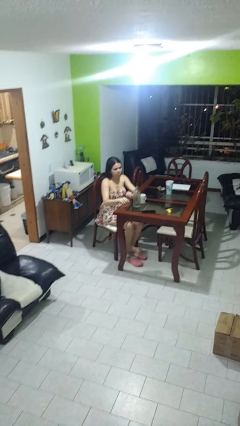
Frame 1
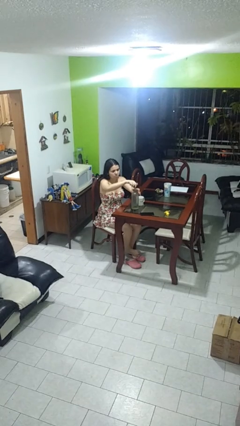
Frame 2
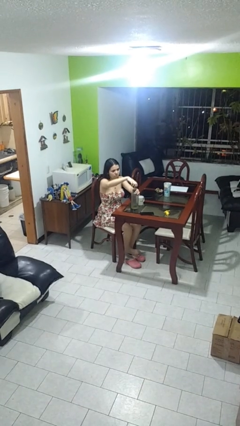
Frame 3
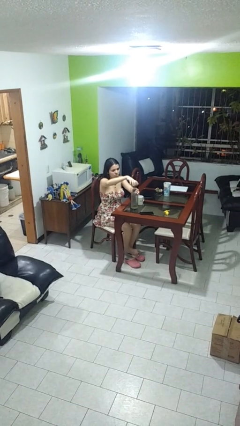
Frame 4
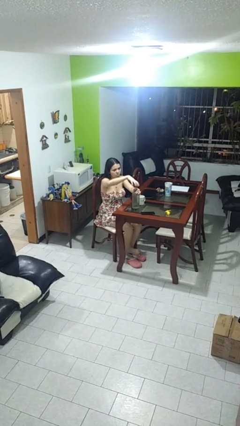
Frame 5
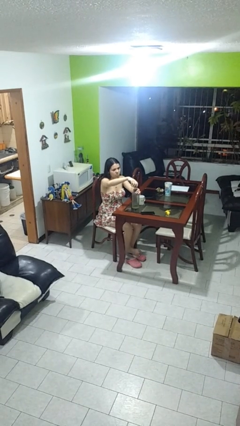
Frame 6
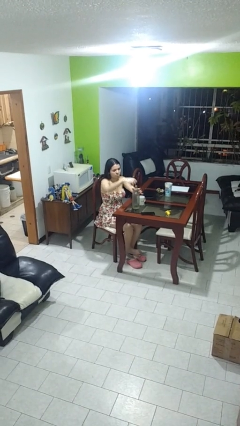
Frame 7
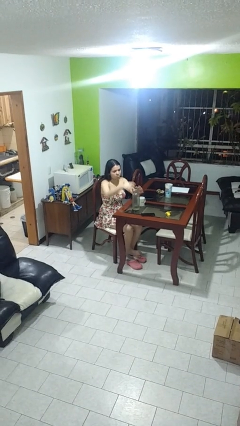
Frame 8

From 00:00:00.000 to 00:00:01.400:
person unscrews lid from bottle

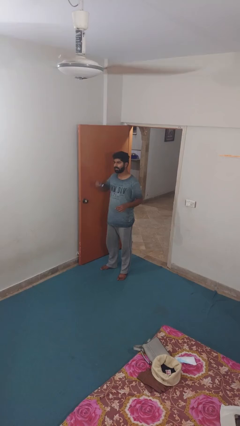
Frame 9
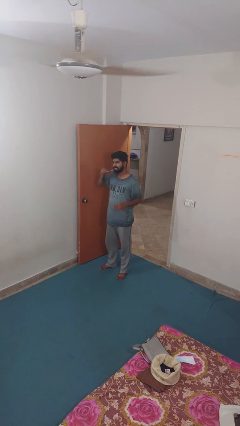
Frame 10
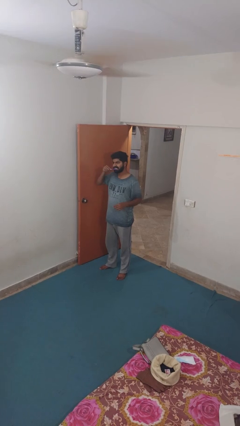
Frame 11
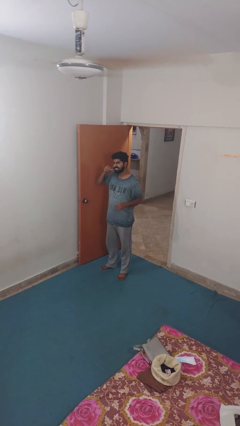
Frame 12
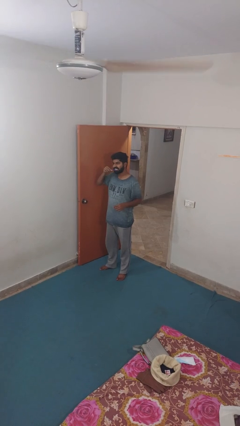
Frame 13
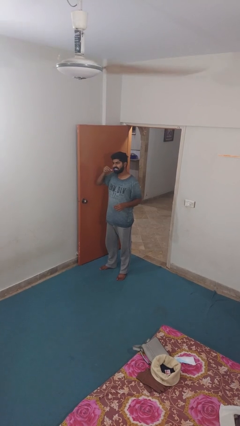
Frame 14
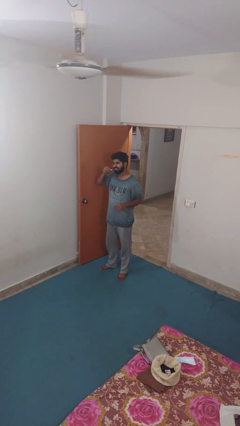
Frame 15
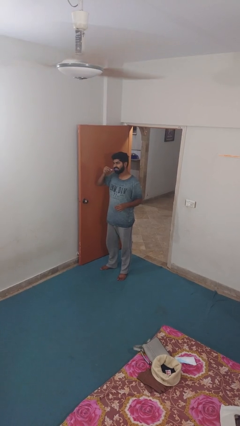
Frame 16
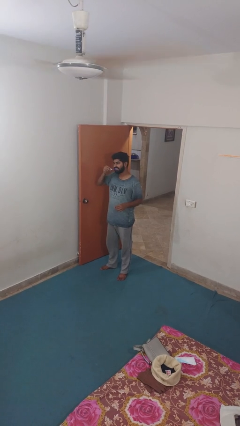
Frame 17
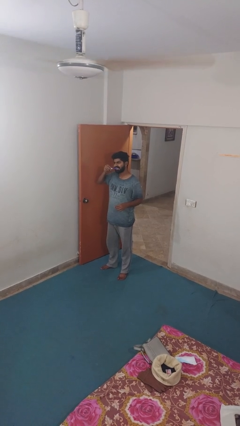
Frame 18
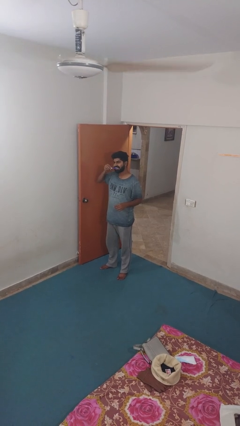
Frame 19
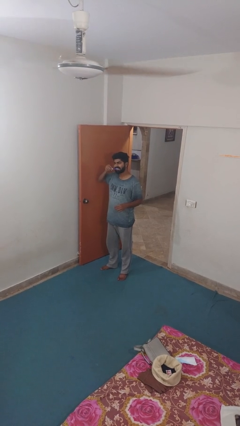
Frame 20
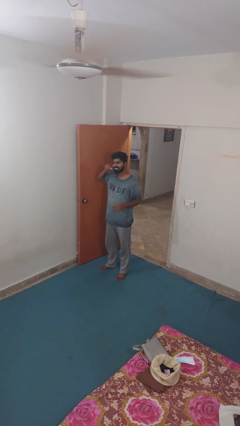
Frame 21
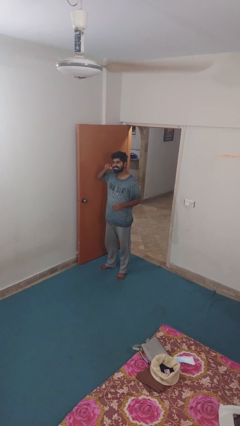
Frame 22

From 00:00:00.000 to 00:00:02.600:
person brushes teeth

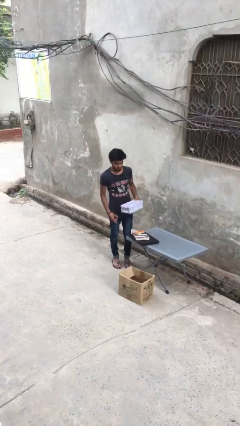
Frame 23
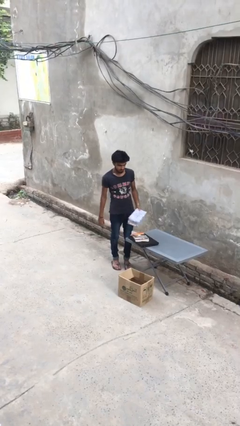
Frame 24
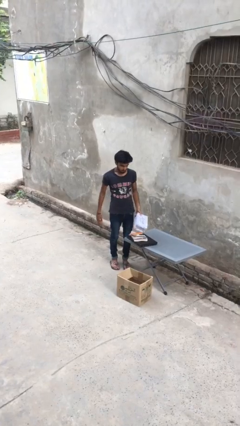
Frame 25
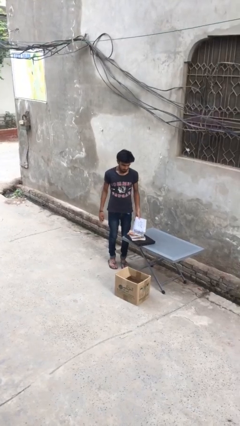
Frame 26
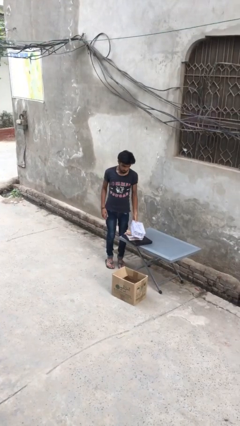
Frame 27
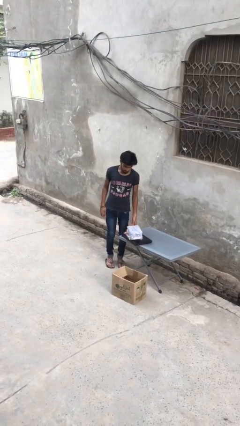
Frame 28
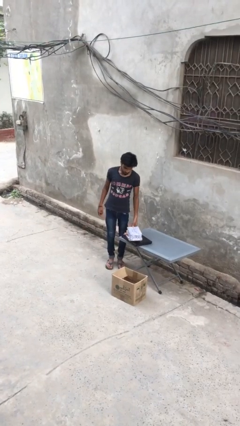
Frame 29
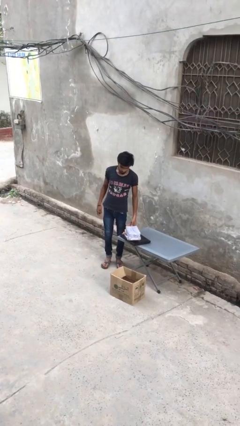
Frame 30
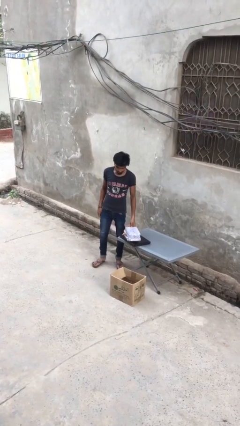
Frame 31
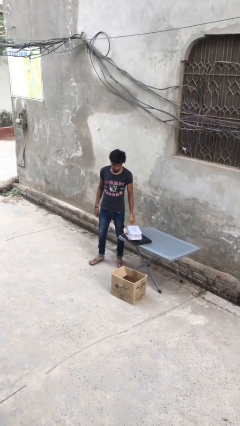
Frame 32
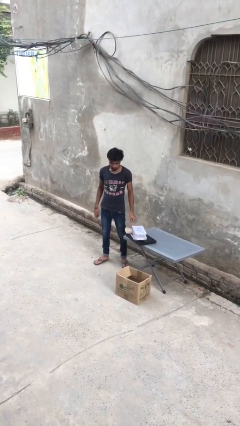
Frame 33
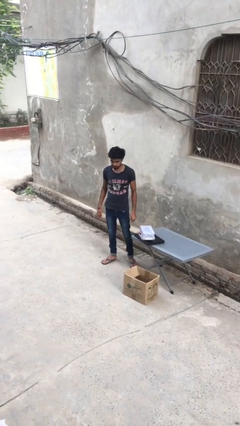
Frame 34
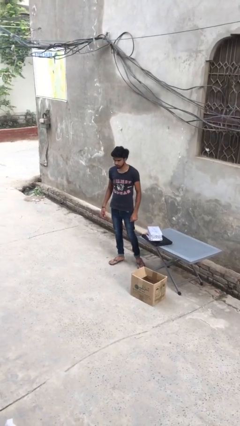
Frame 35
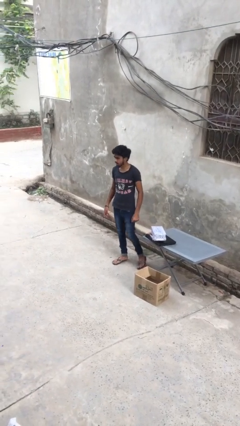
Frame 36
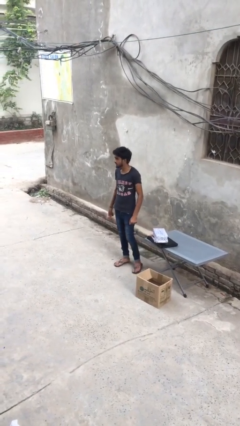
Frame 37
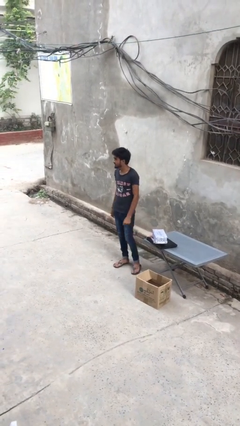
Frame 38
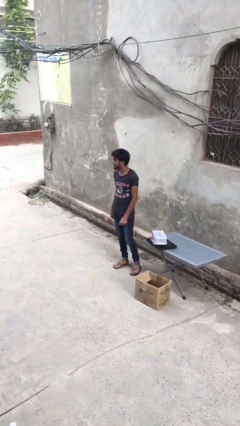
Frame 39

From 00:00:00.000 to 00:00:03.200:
person puts down object on table

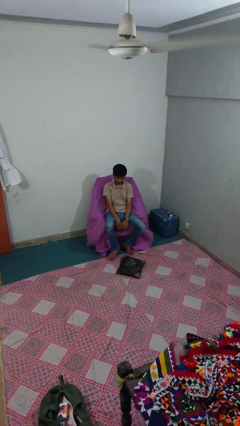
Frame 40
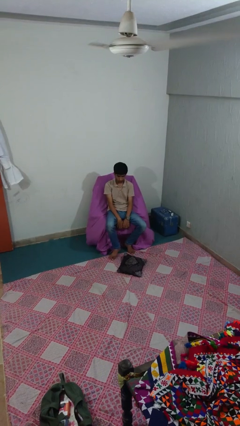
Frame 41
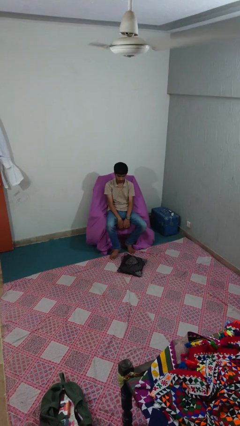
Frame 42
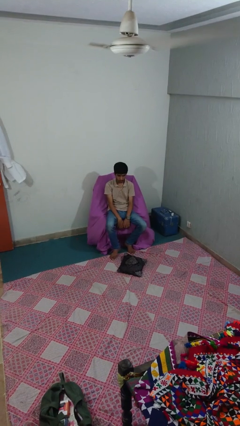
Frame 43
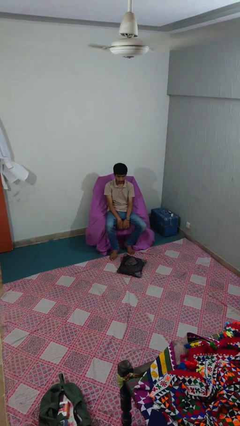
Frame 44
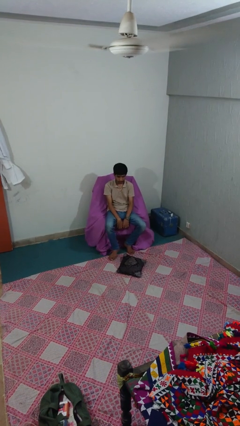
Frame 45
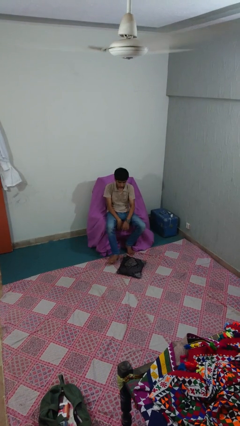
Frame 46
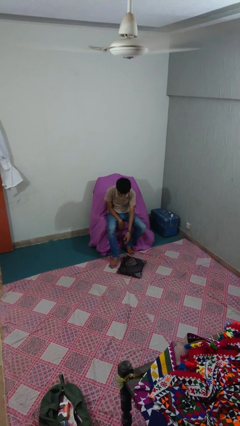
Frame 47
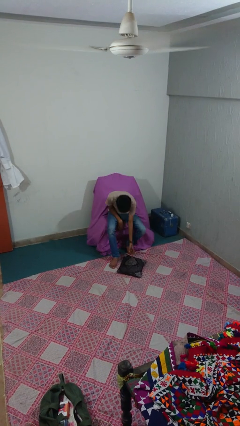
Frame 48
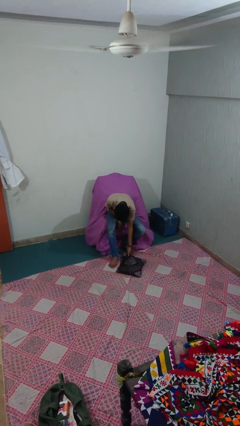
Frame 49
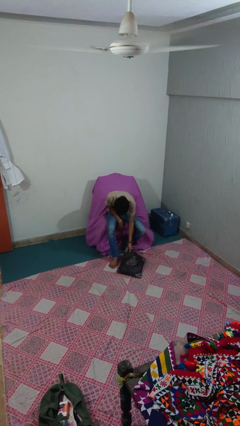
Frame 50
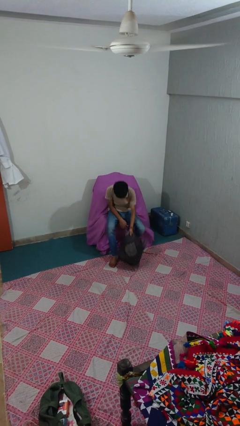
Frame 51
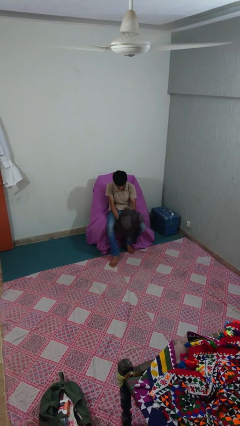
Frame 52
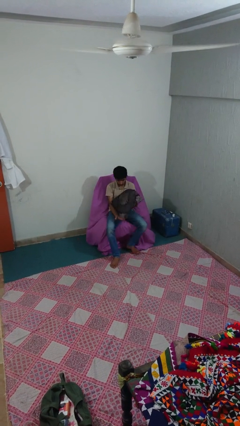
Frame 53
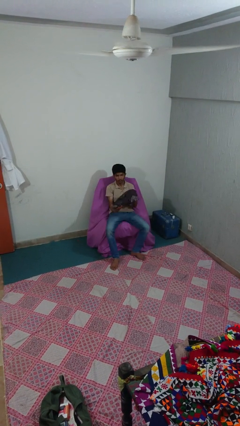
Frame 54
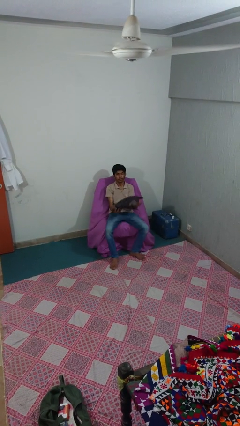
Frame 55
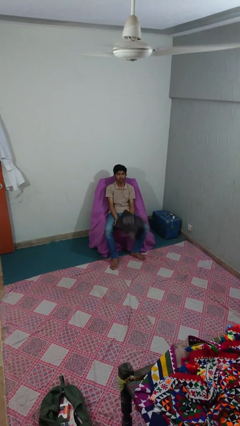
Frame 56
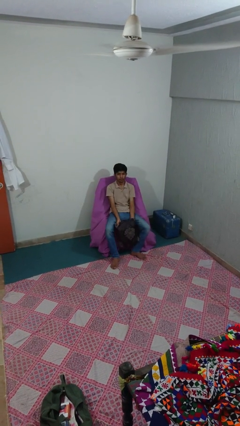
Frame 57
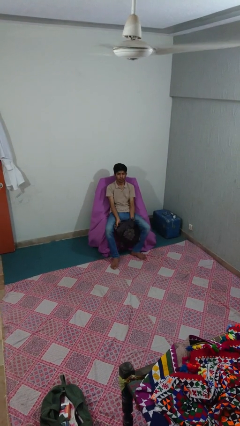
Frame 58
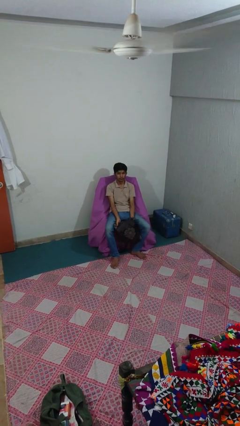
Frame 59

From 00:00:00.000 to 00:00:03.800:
person picks up object from floor

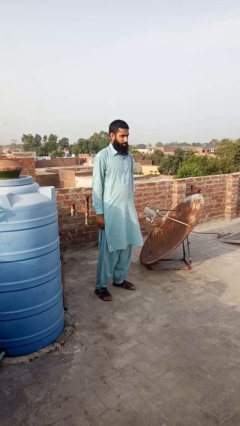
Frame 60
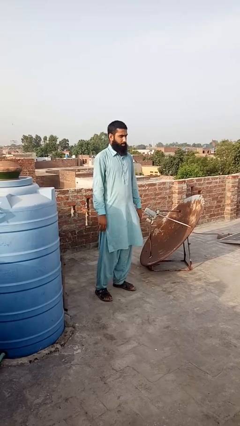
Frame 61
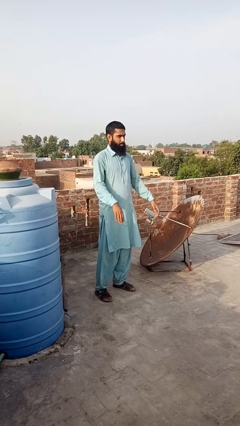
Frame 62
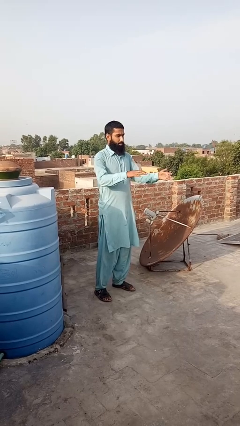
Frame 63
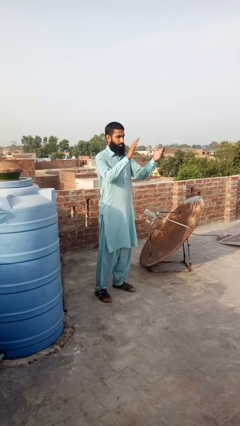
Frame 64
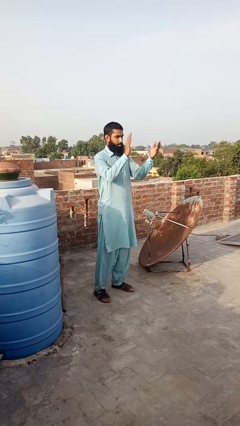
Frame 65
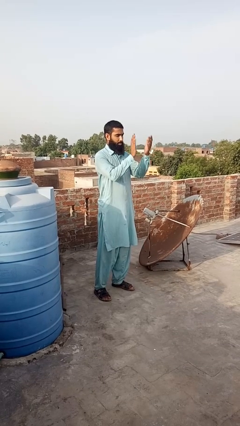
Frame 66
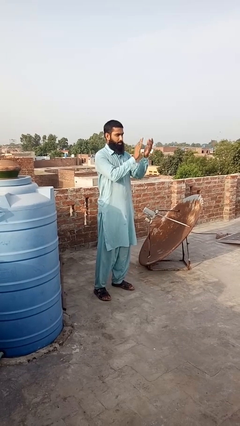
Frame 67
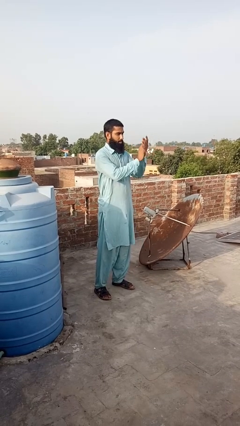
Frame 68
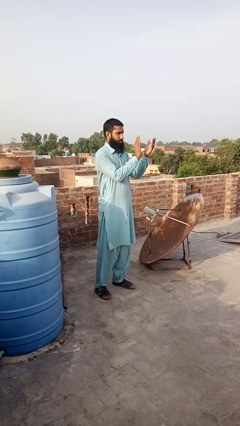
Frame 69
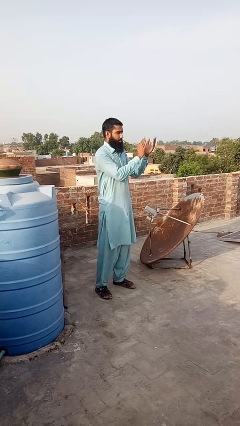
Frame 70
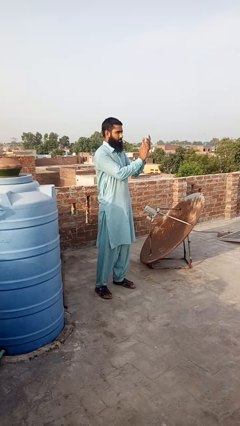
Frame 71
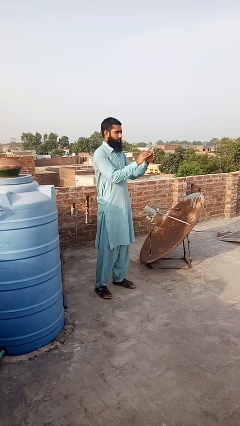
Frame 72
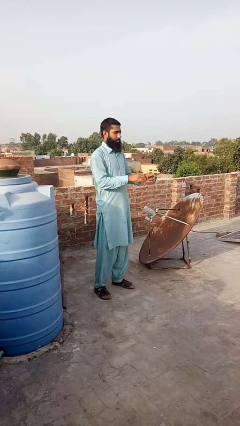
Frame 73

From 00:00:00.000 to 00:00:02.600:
person claps hands

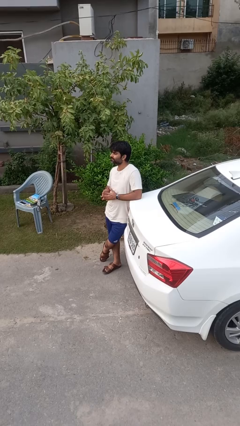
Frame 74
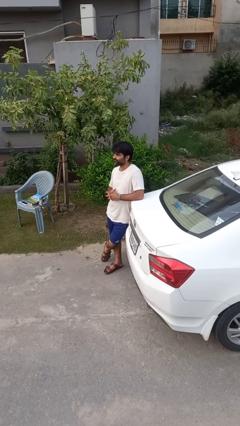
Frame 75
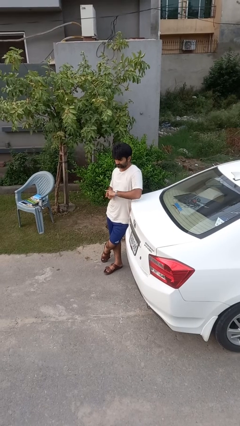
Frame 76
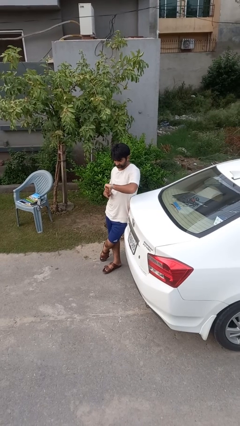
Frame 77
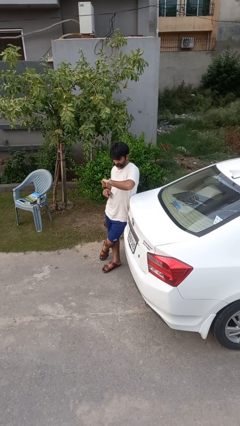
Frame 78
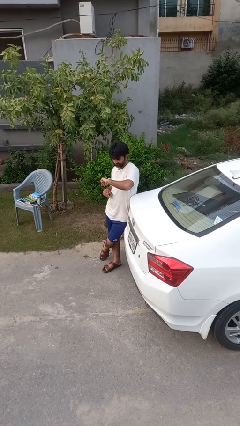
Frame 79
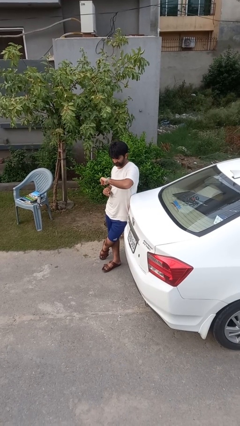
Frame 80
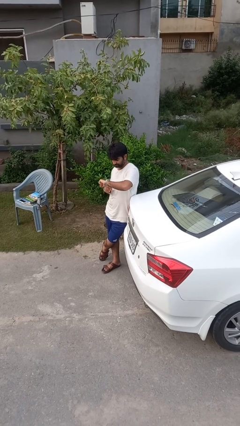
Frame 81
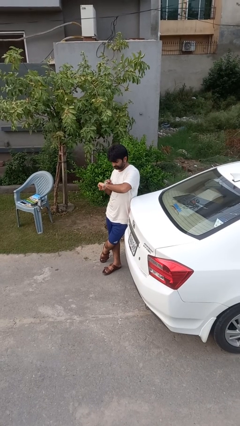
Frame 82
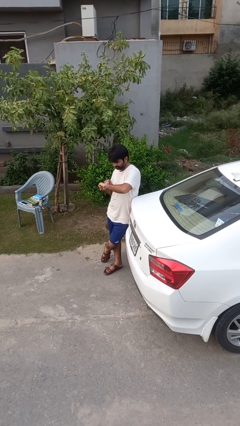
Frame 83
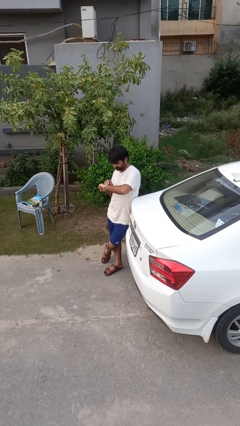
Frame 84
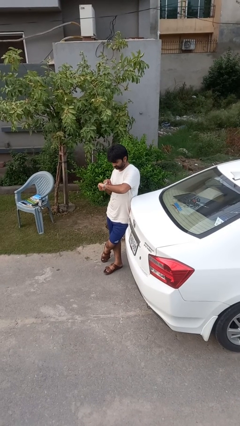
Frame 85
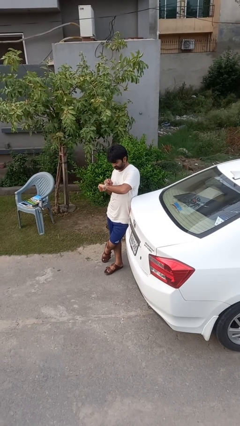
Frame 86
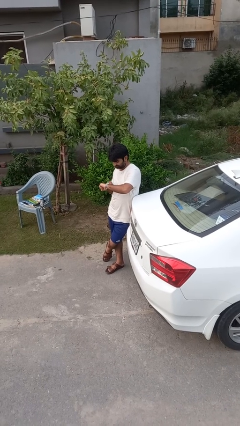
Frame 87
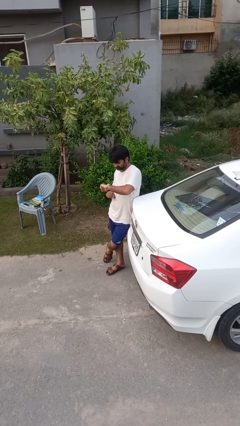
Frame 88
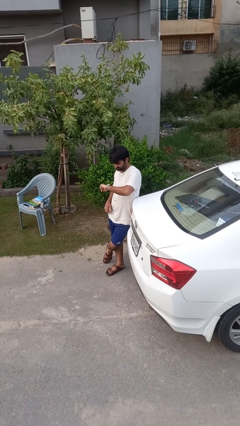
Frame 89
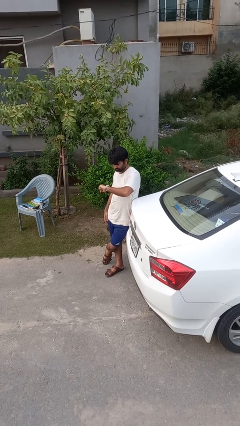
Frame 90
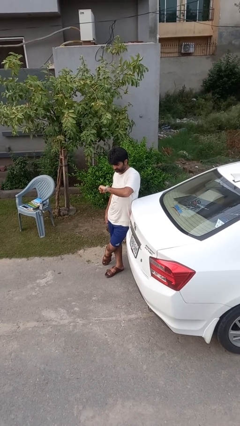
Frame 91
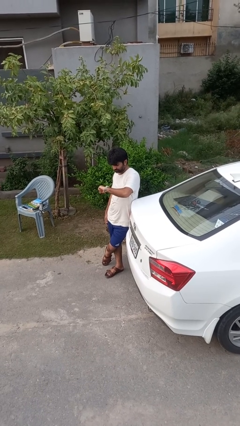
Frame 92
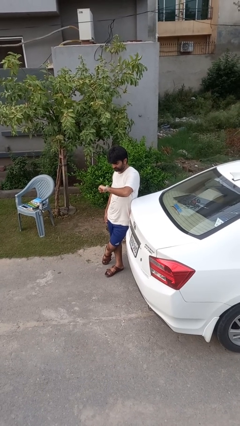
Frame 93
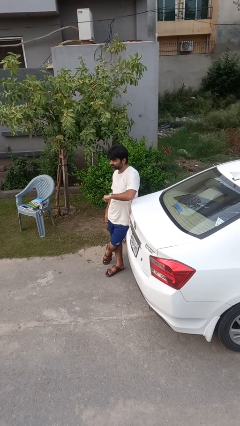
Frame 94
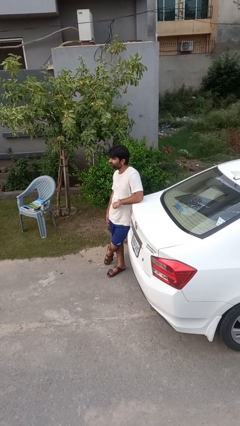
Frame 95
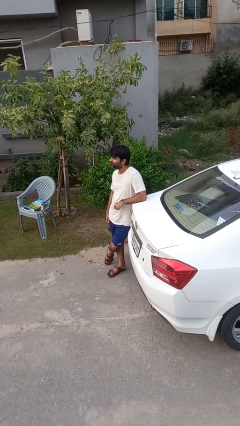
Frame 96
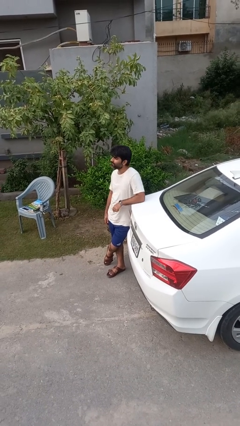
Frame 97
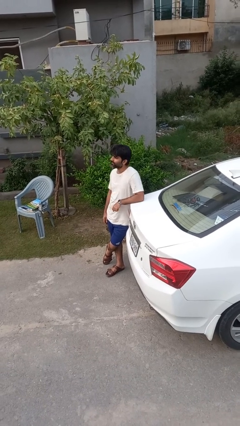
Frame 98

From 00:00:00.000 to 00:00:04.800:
person looks at wristwatch
